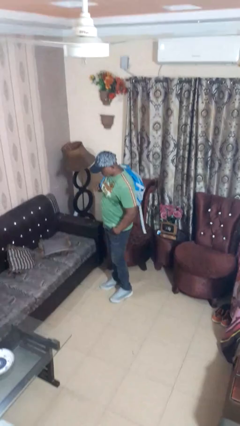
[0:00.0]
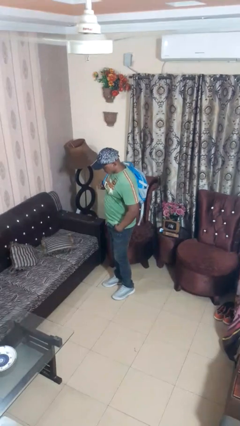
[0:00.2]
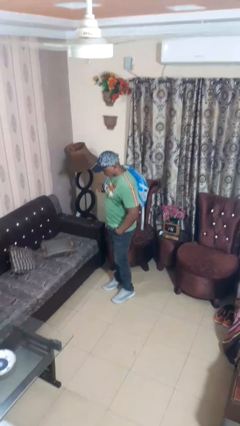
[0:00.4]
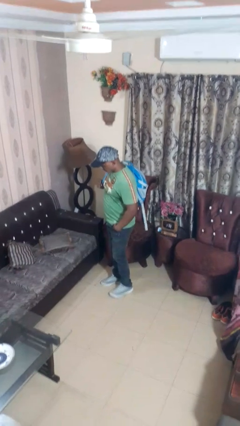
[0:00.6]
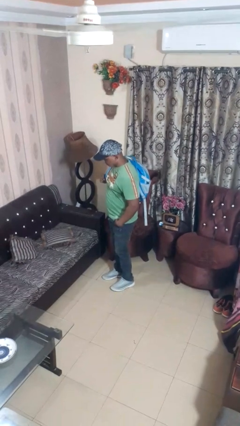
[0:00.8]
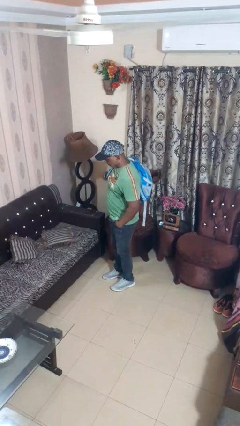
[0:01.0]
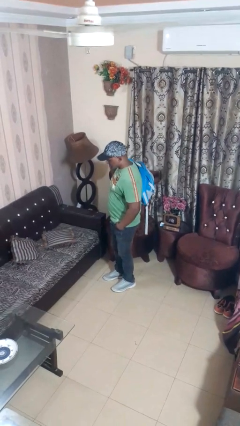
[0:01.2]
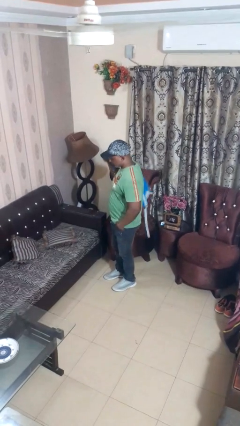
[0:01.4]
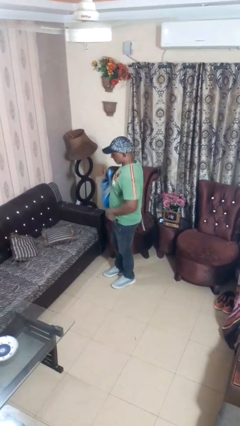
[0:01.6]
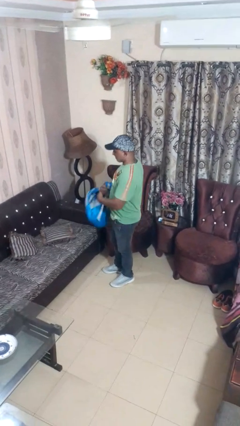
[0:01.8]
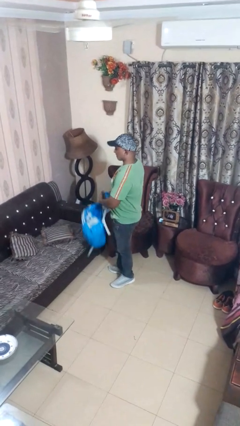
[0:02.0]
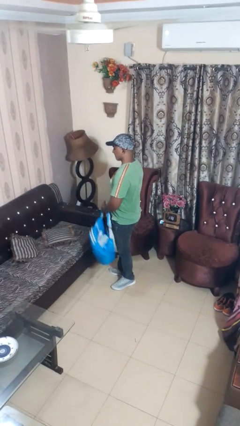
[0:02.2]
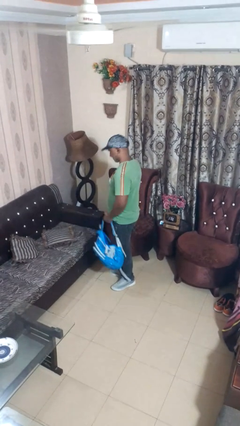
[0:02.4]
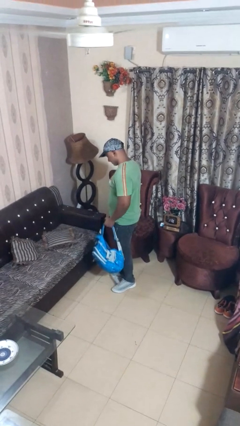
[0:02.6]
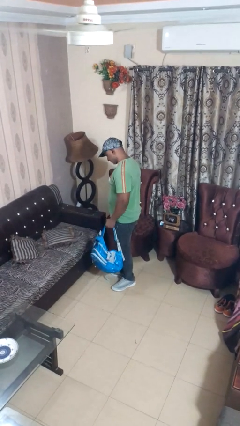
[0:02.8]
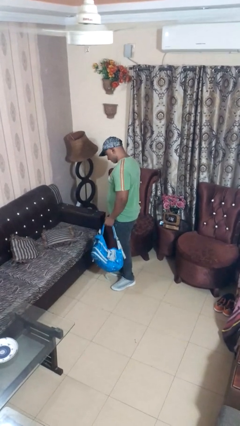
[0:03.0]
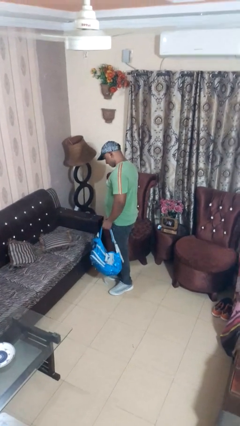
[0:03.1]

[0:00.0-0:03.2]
person takes off backpack

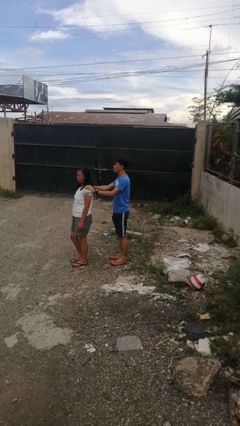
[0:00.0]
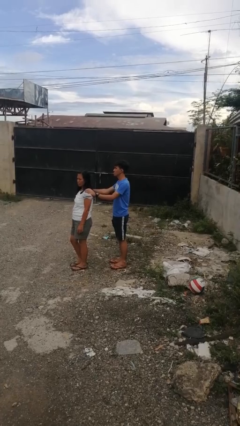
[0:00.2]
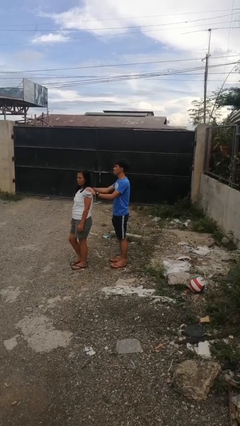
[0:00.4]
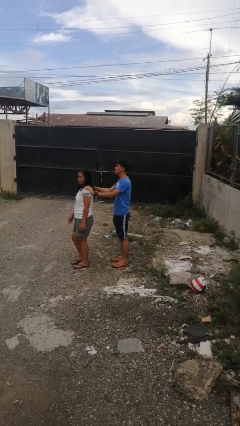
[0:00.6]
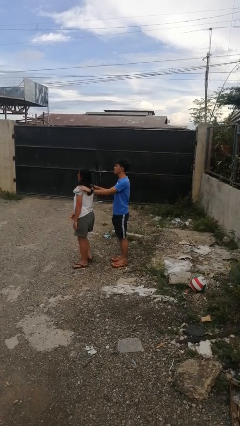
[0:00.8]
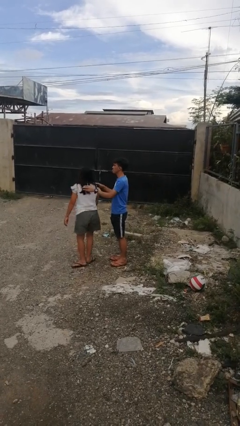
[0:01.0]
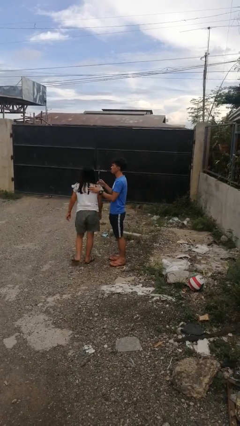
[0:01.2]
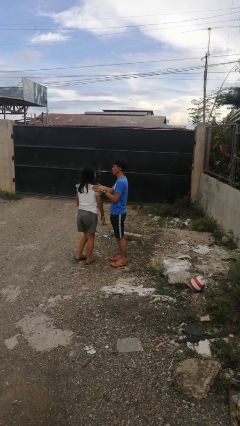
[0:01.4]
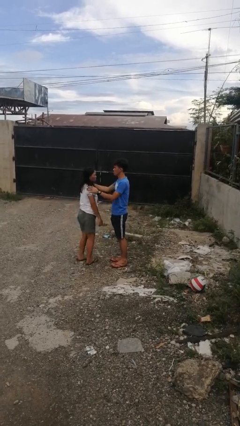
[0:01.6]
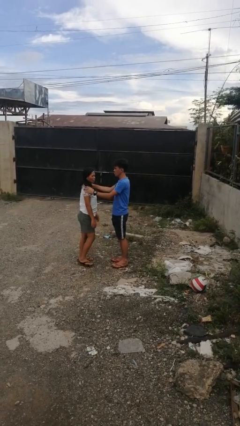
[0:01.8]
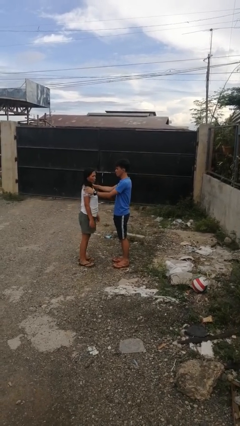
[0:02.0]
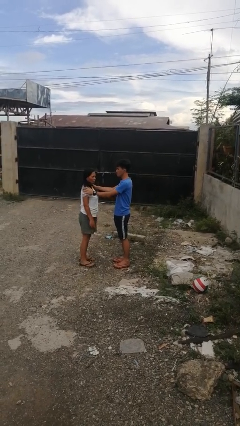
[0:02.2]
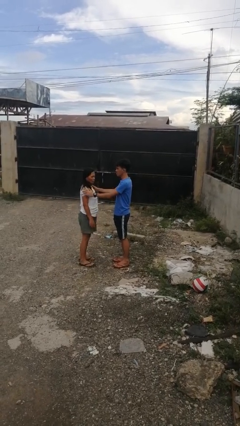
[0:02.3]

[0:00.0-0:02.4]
person spins person around

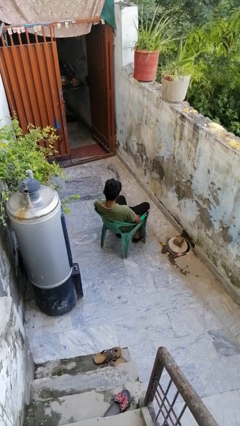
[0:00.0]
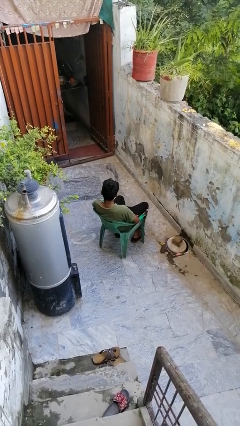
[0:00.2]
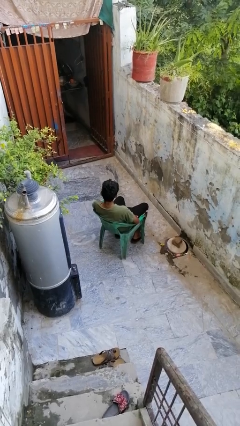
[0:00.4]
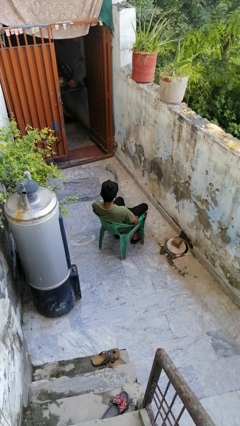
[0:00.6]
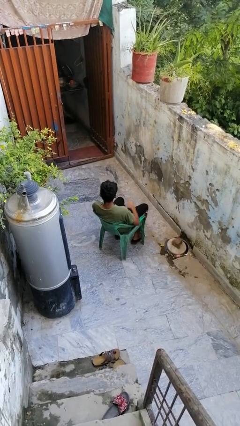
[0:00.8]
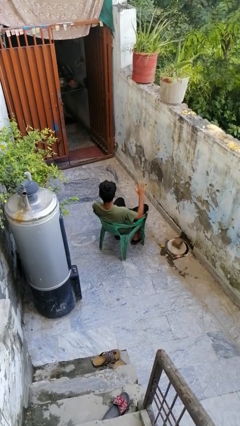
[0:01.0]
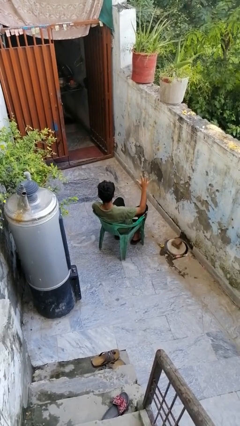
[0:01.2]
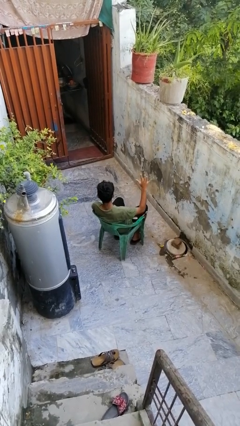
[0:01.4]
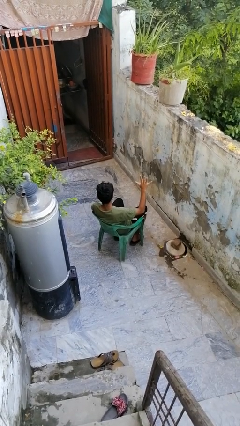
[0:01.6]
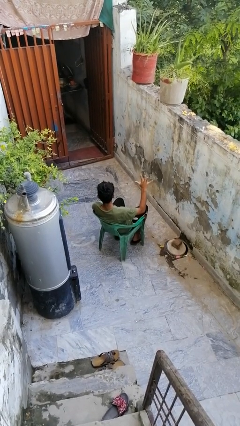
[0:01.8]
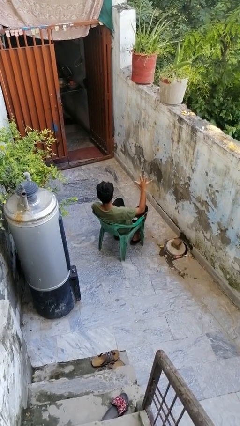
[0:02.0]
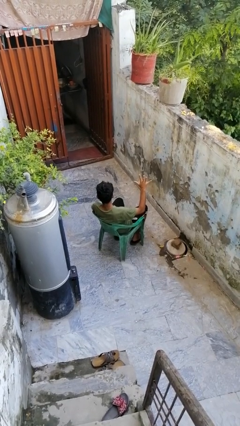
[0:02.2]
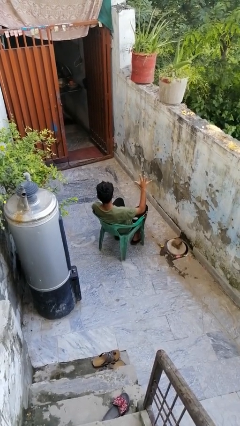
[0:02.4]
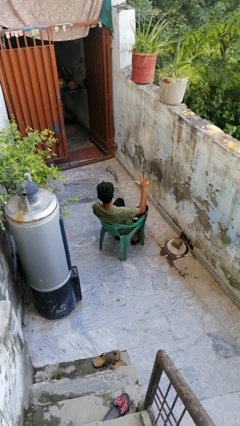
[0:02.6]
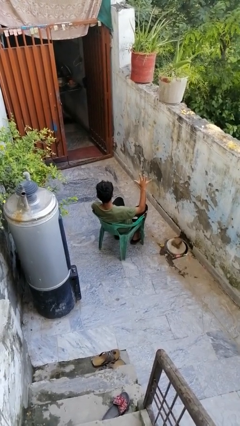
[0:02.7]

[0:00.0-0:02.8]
person gestures number five

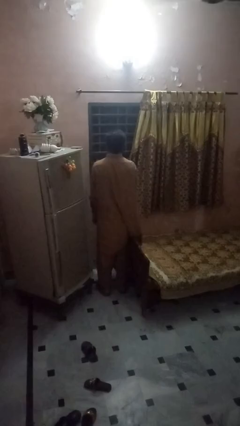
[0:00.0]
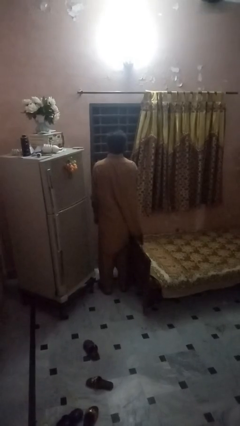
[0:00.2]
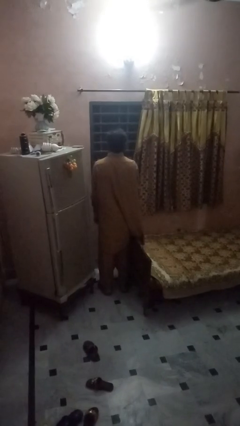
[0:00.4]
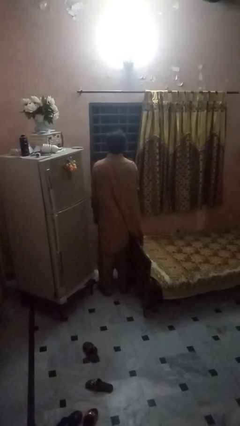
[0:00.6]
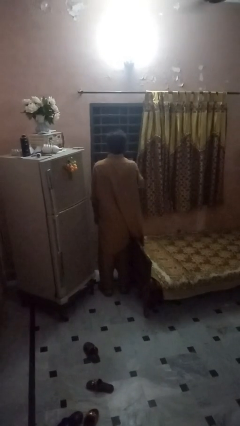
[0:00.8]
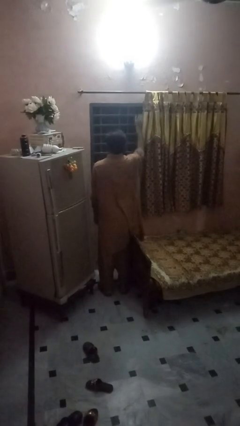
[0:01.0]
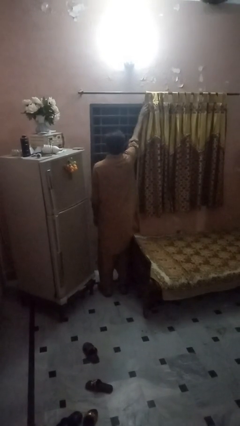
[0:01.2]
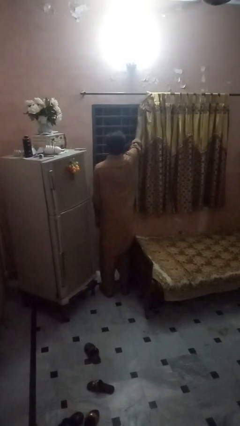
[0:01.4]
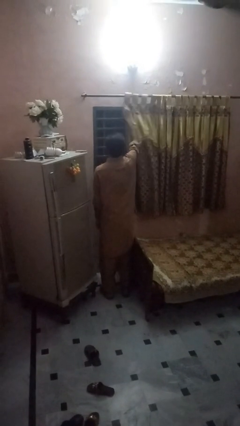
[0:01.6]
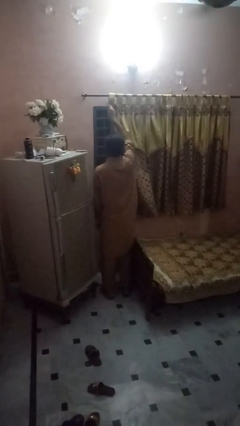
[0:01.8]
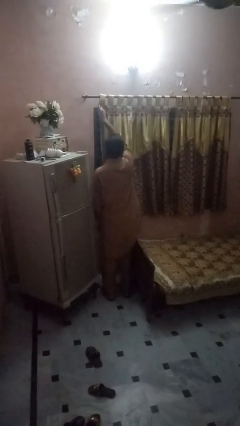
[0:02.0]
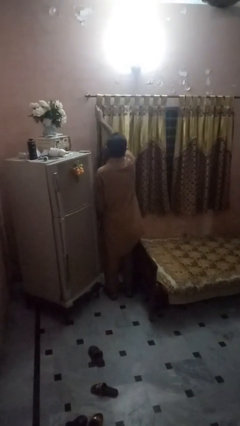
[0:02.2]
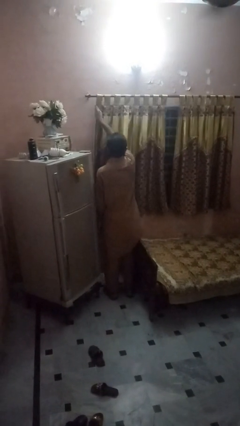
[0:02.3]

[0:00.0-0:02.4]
person closes curtains

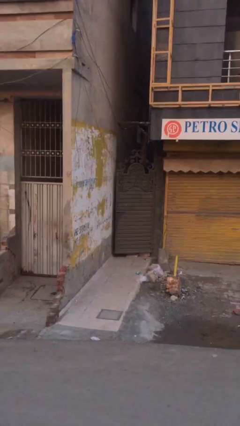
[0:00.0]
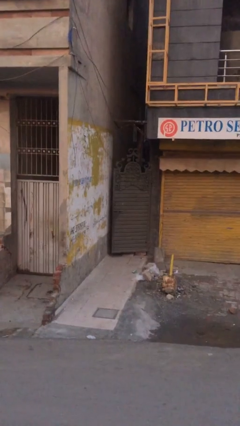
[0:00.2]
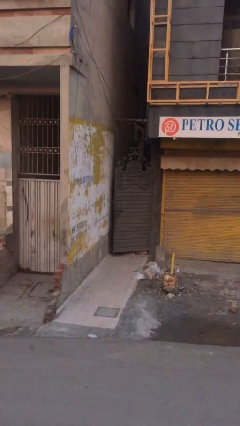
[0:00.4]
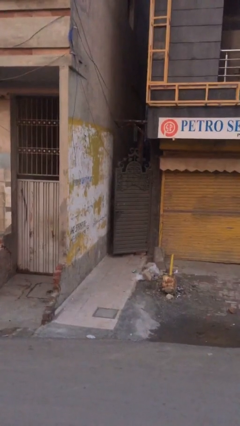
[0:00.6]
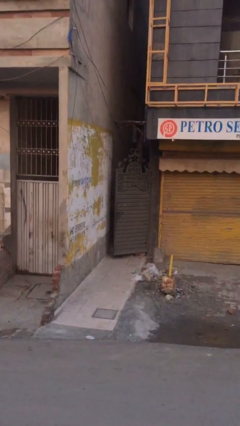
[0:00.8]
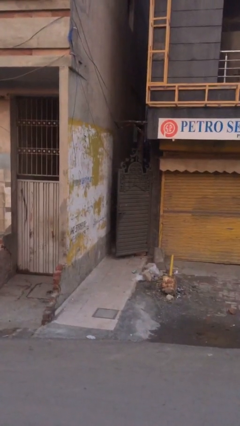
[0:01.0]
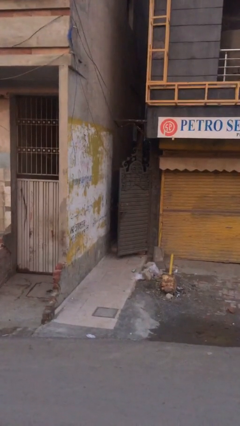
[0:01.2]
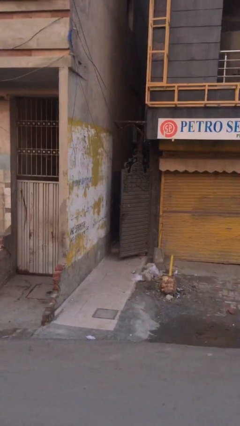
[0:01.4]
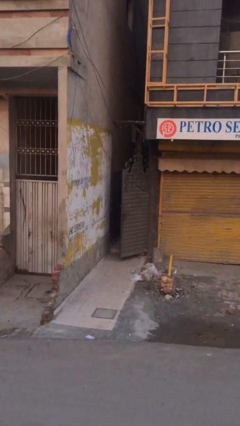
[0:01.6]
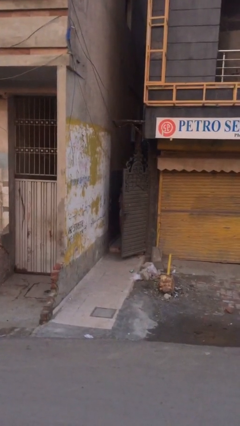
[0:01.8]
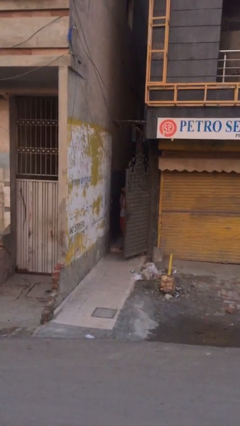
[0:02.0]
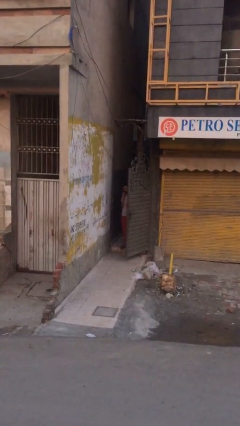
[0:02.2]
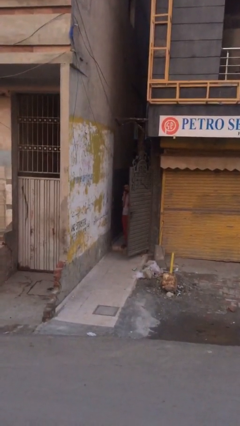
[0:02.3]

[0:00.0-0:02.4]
person opens facility door

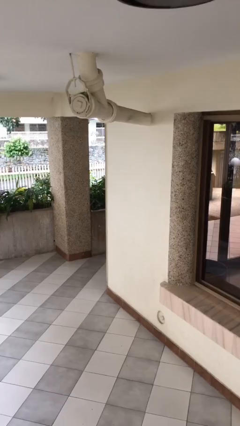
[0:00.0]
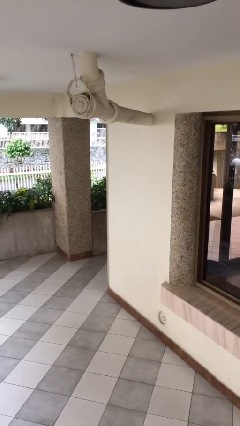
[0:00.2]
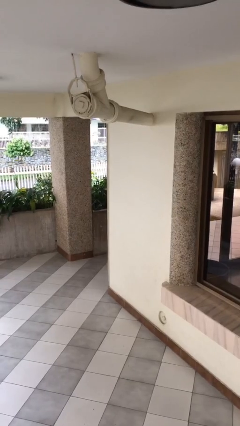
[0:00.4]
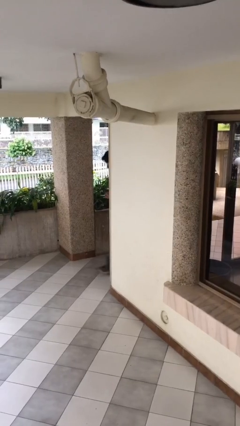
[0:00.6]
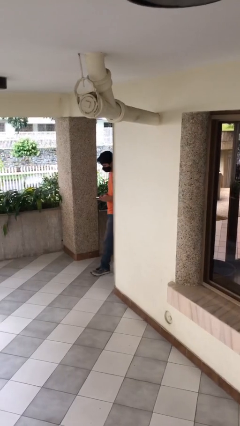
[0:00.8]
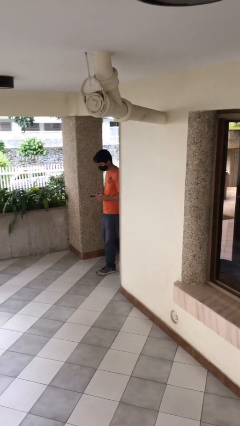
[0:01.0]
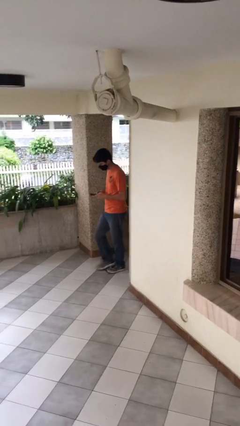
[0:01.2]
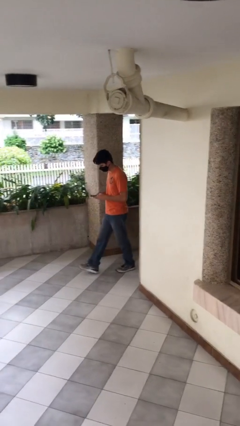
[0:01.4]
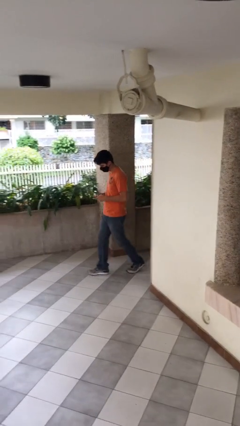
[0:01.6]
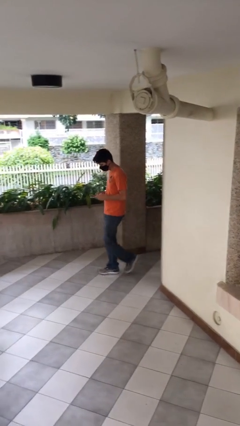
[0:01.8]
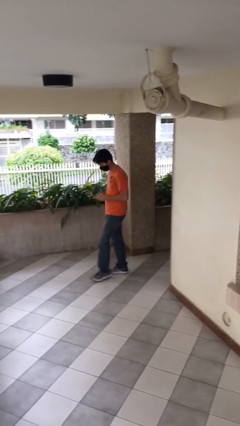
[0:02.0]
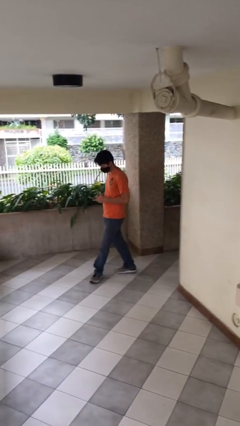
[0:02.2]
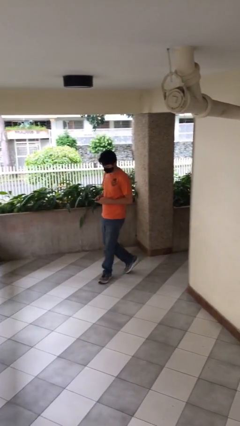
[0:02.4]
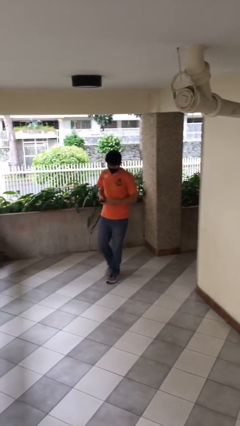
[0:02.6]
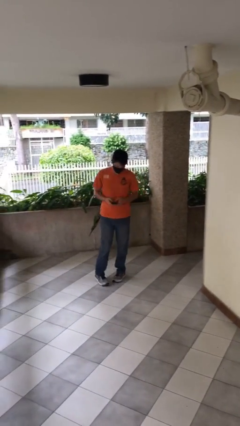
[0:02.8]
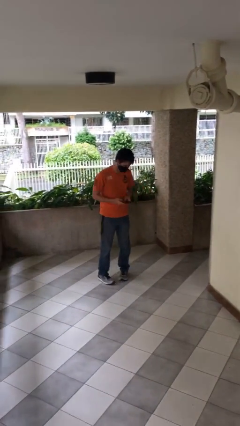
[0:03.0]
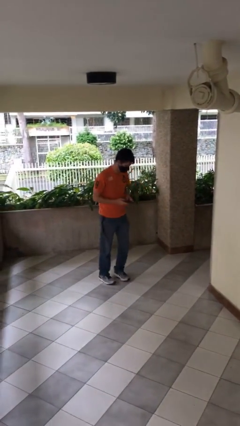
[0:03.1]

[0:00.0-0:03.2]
person enters scene through structure

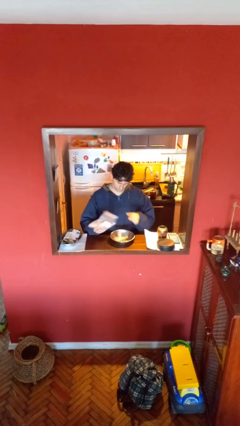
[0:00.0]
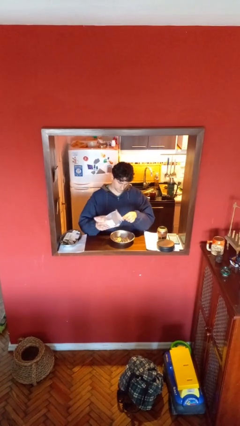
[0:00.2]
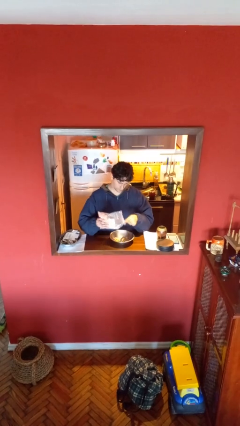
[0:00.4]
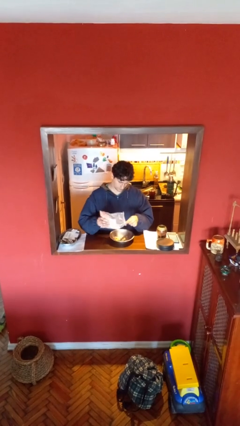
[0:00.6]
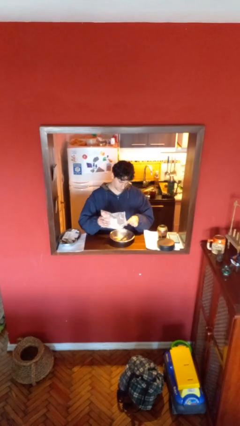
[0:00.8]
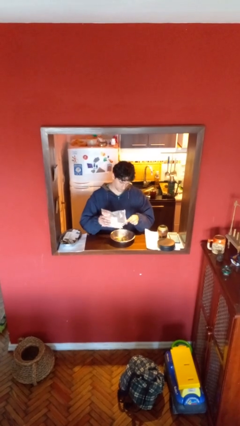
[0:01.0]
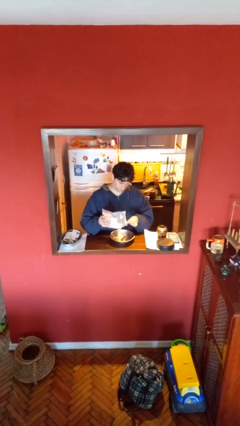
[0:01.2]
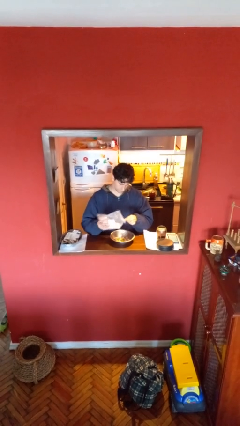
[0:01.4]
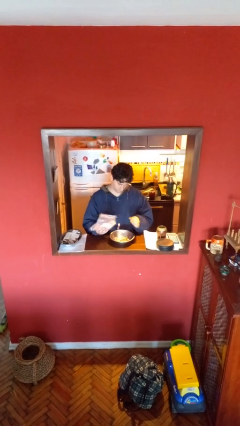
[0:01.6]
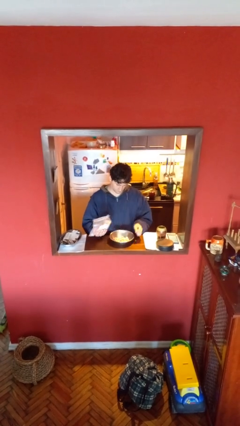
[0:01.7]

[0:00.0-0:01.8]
person pours into bowl
